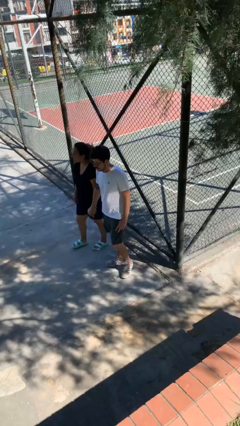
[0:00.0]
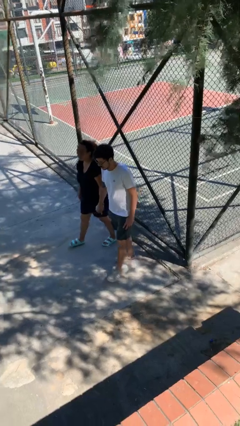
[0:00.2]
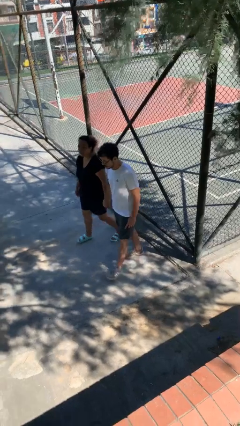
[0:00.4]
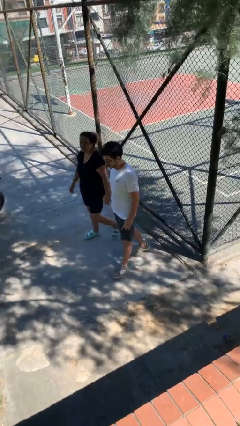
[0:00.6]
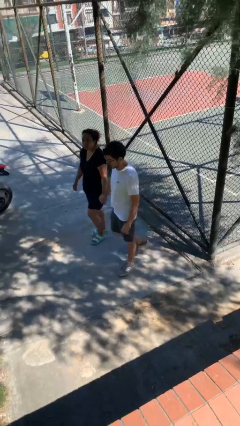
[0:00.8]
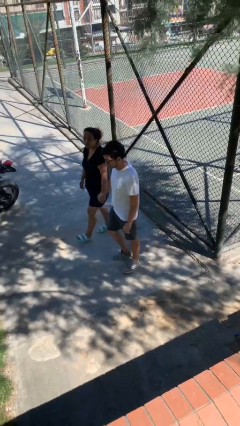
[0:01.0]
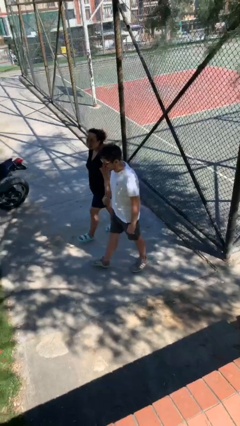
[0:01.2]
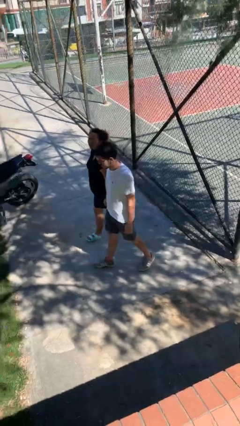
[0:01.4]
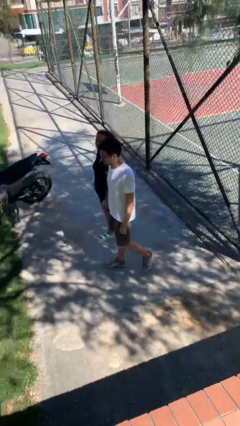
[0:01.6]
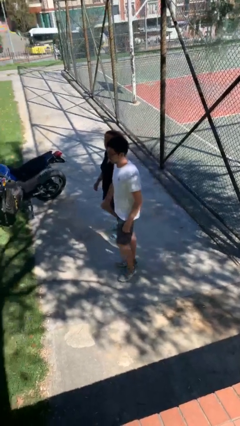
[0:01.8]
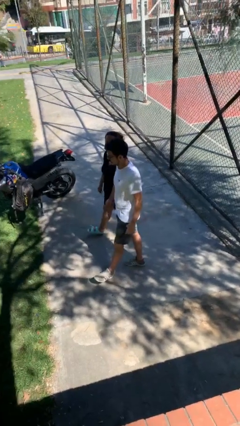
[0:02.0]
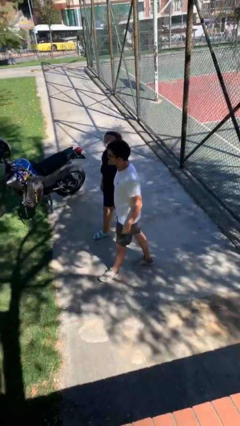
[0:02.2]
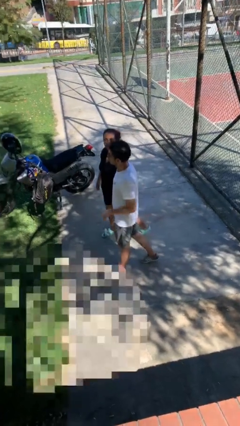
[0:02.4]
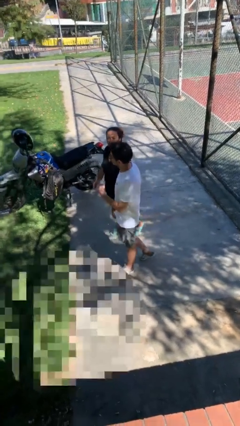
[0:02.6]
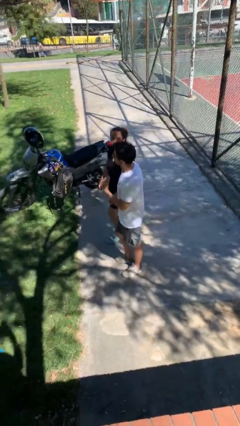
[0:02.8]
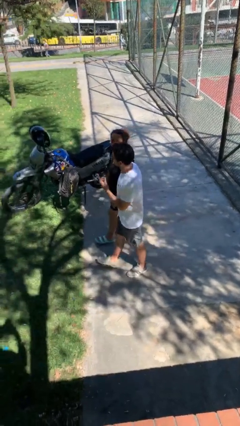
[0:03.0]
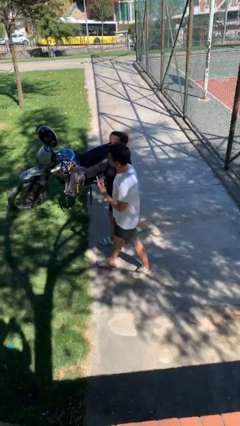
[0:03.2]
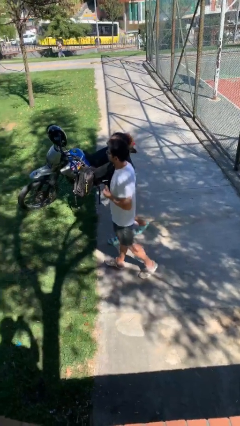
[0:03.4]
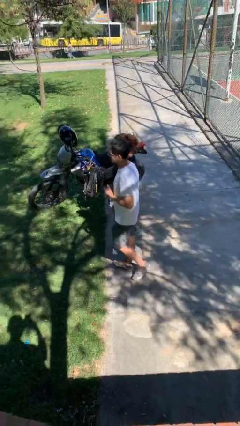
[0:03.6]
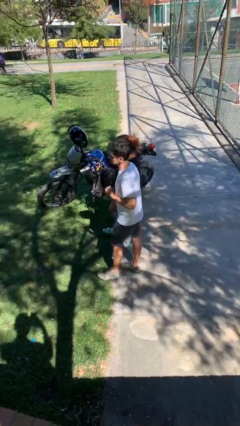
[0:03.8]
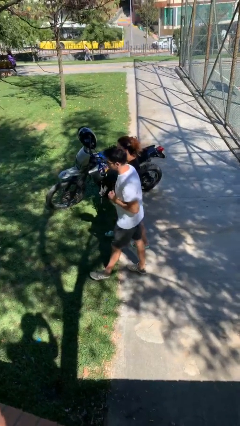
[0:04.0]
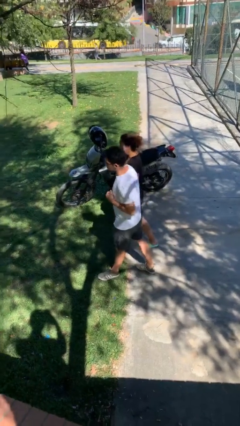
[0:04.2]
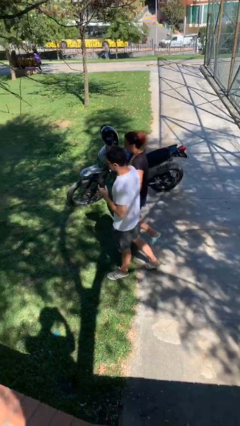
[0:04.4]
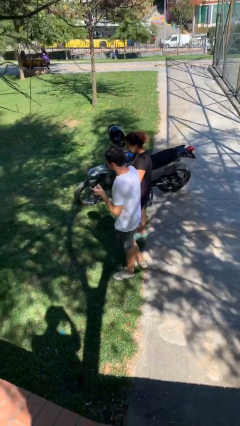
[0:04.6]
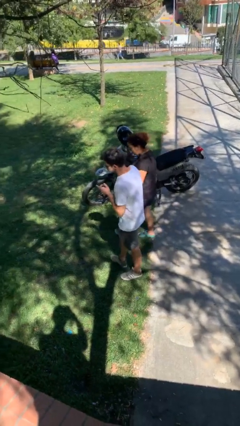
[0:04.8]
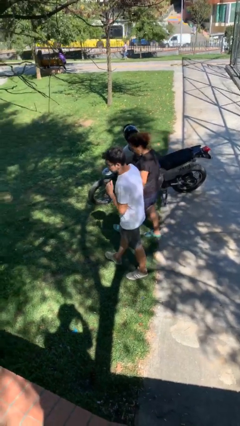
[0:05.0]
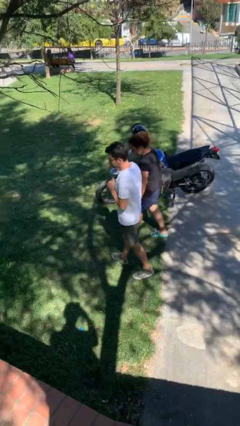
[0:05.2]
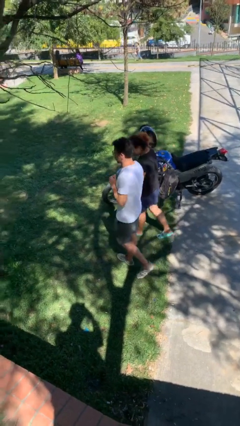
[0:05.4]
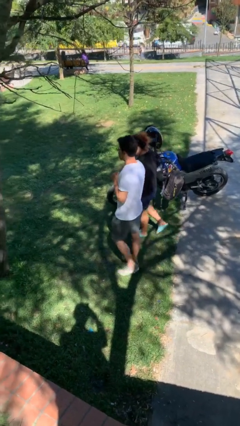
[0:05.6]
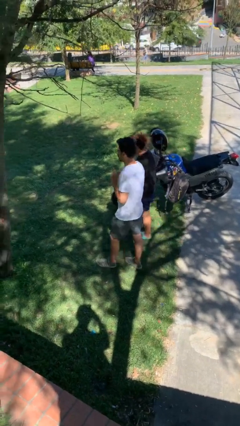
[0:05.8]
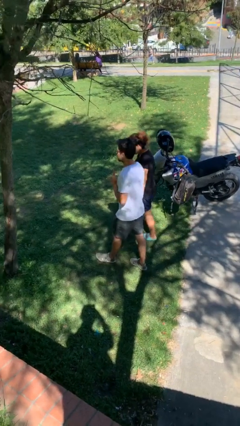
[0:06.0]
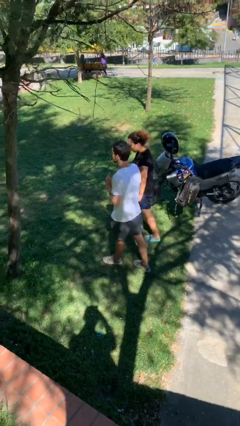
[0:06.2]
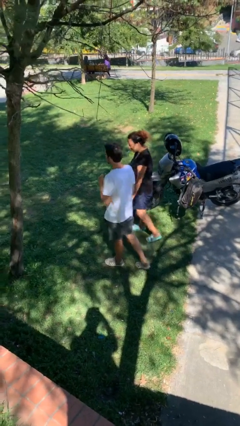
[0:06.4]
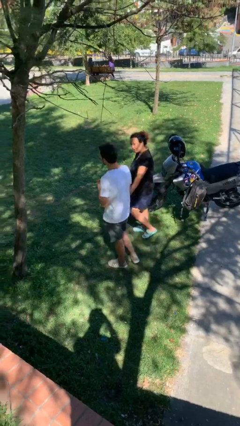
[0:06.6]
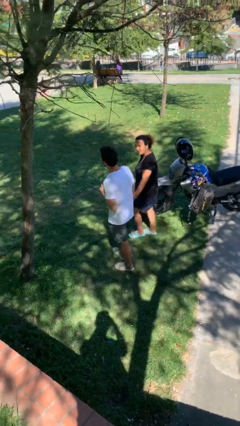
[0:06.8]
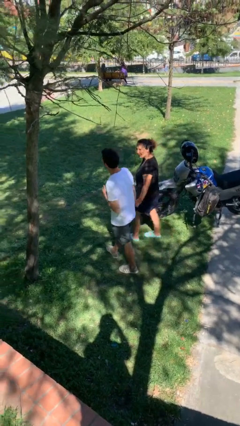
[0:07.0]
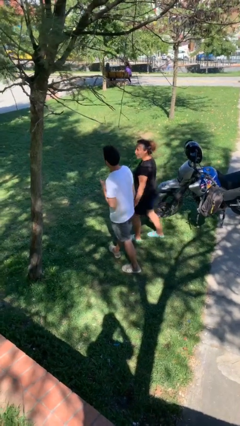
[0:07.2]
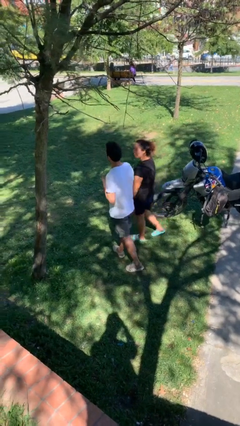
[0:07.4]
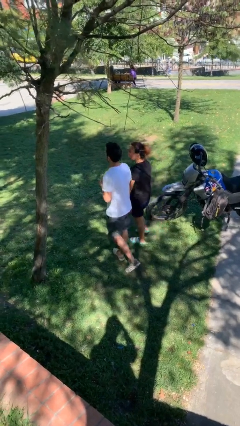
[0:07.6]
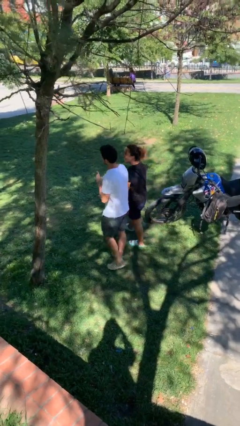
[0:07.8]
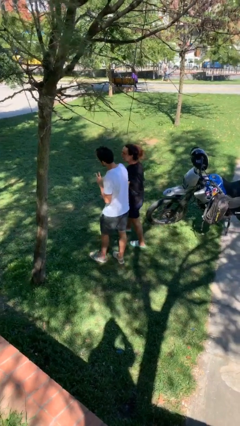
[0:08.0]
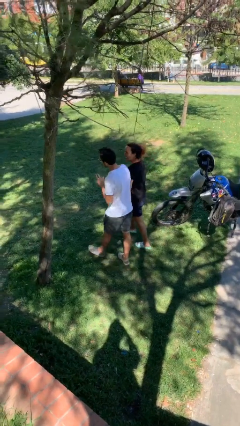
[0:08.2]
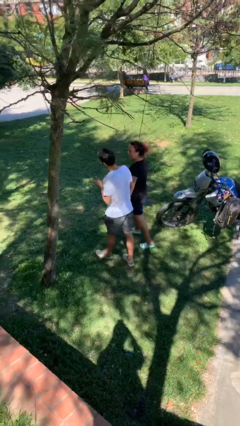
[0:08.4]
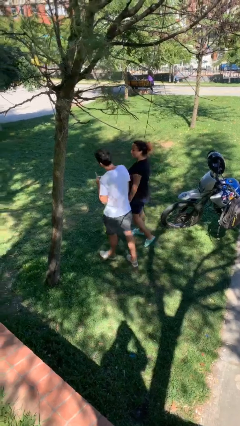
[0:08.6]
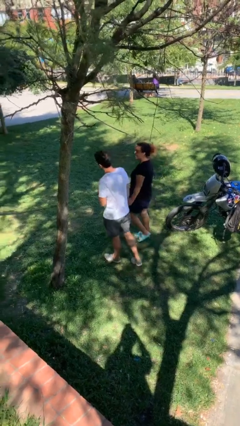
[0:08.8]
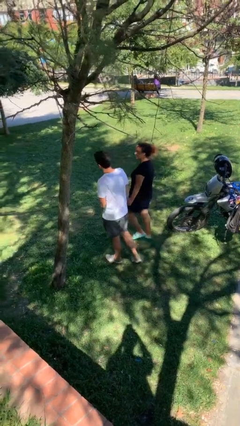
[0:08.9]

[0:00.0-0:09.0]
person holds hand

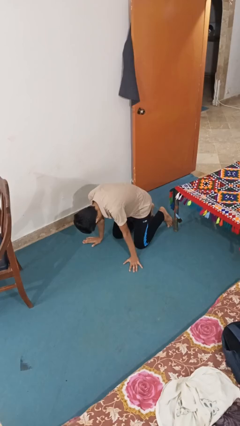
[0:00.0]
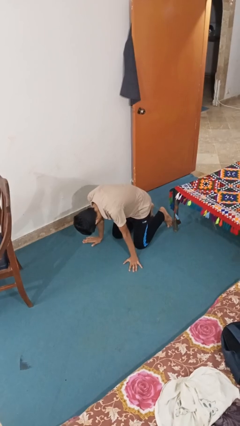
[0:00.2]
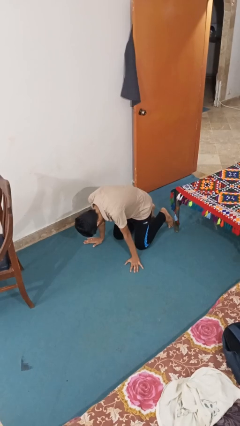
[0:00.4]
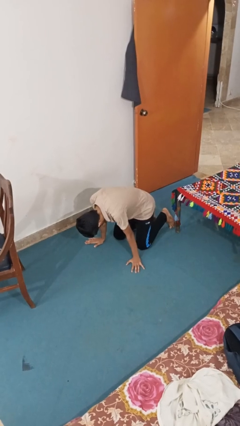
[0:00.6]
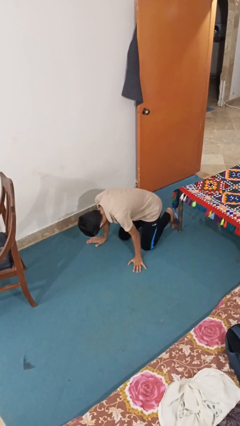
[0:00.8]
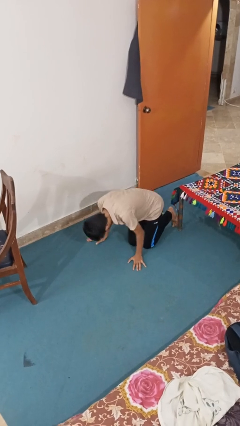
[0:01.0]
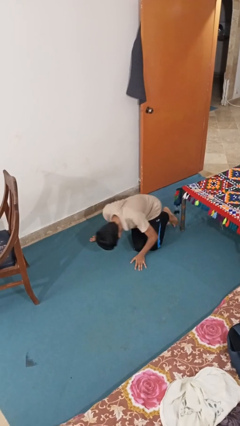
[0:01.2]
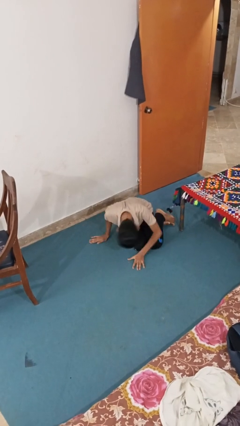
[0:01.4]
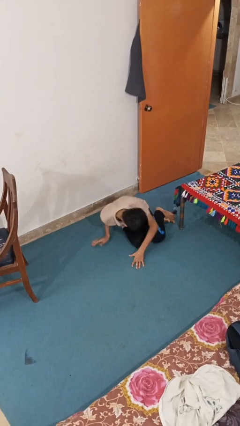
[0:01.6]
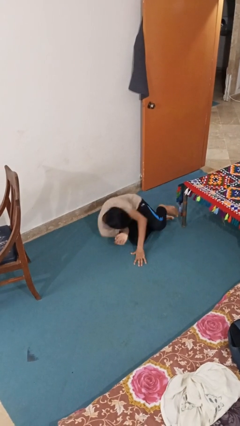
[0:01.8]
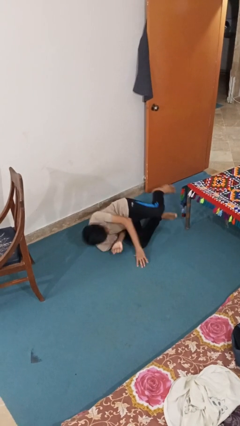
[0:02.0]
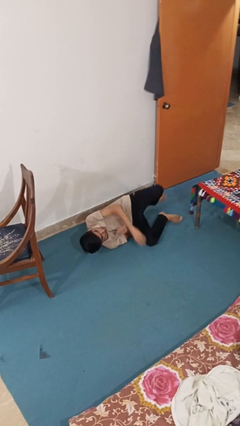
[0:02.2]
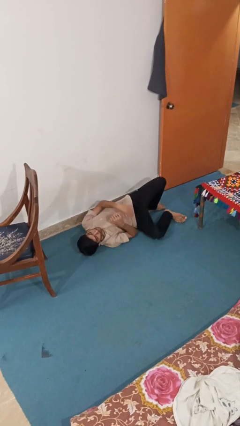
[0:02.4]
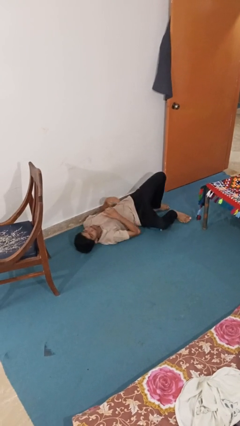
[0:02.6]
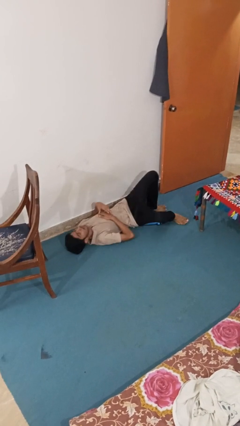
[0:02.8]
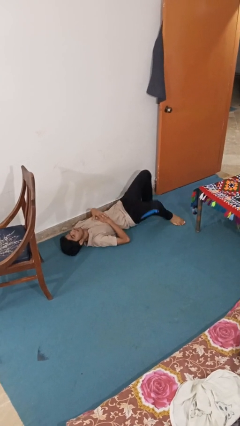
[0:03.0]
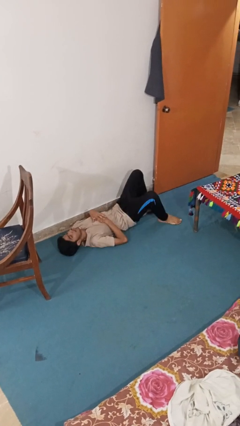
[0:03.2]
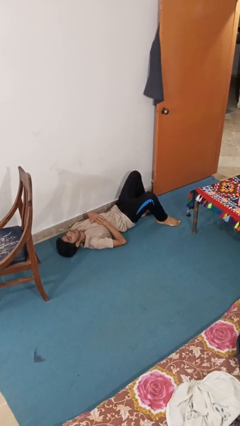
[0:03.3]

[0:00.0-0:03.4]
person lies down on floor

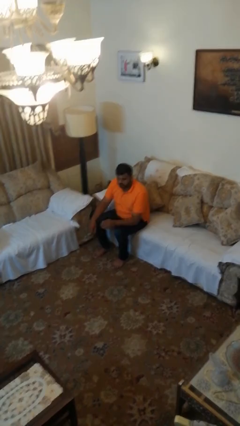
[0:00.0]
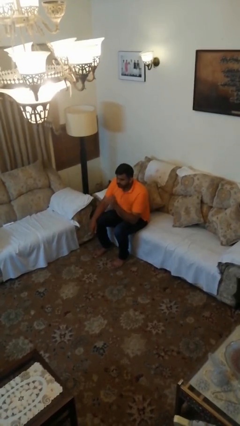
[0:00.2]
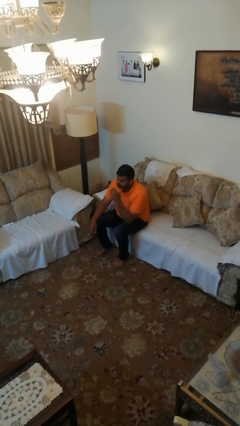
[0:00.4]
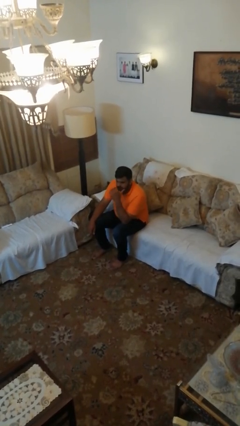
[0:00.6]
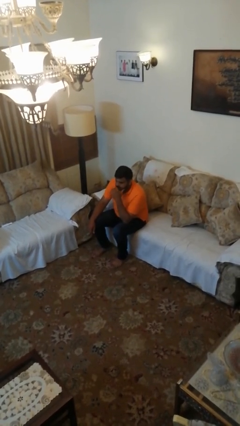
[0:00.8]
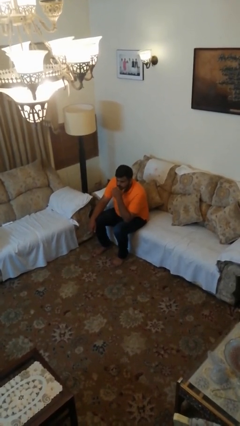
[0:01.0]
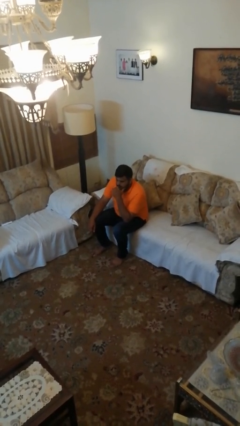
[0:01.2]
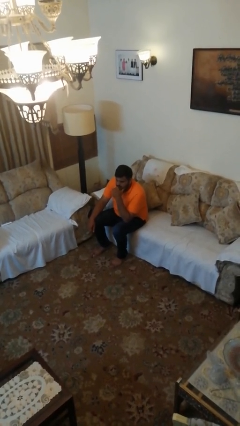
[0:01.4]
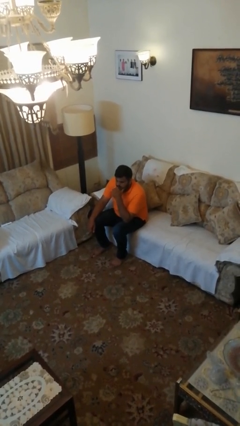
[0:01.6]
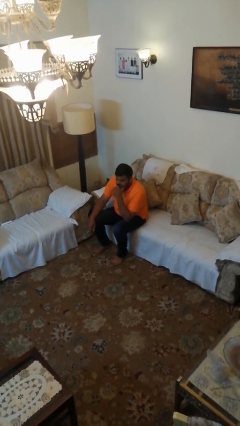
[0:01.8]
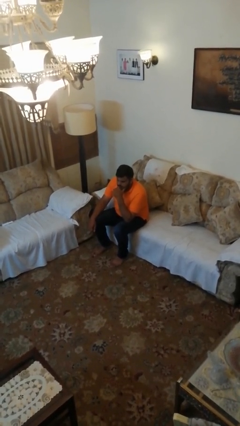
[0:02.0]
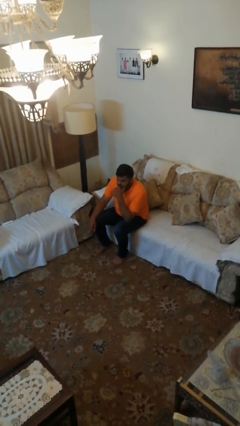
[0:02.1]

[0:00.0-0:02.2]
person strokes chin

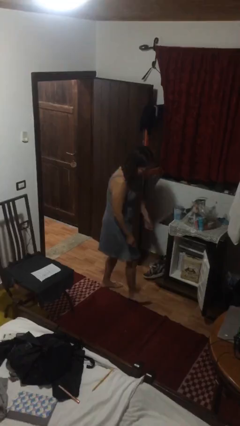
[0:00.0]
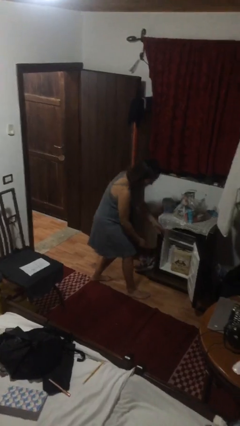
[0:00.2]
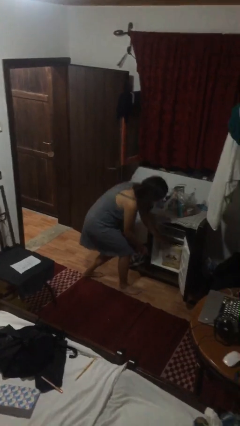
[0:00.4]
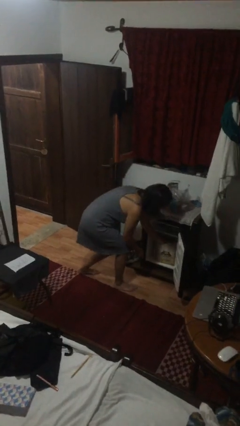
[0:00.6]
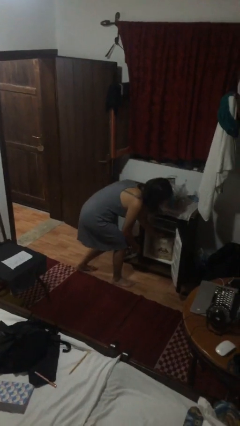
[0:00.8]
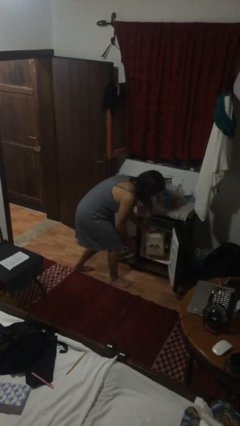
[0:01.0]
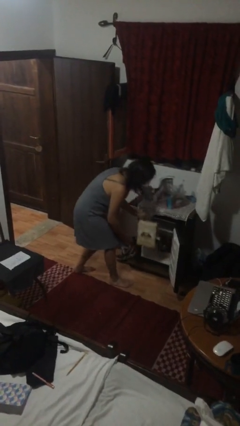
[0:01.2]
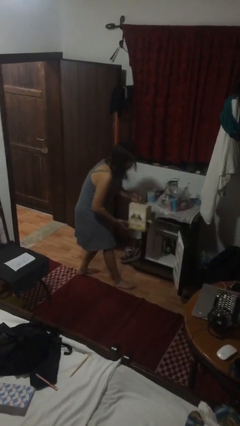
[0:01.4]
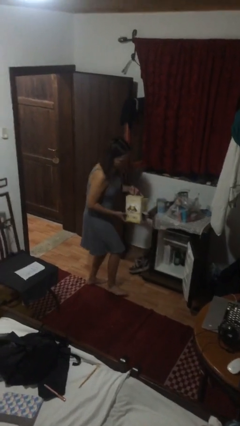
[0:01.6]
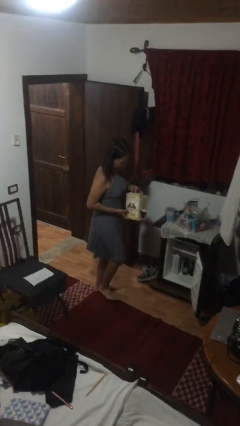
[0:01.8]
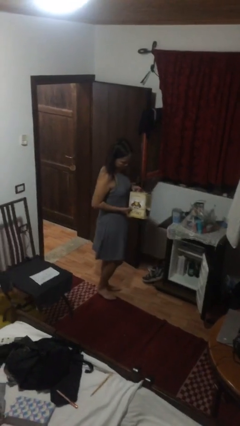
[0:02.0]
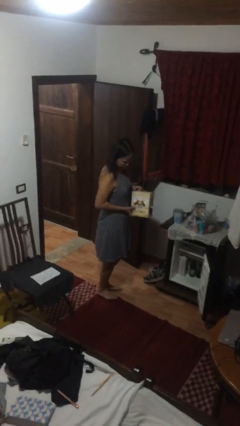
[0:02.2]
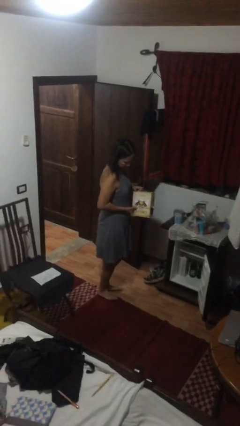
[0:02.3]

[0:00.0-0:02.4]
person picks up object from cabinet

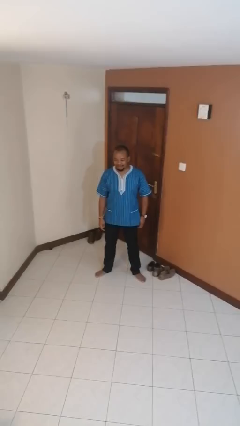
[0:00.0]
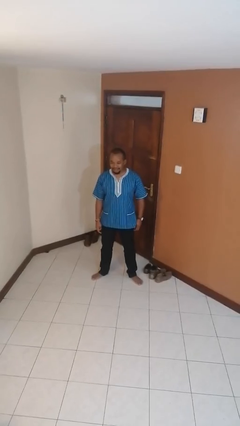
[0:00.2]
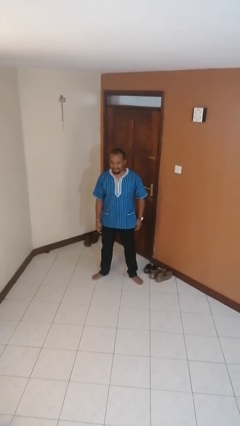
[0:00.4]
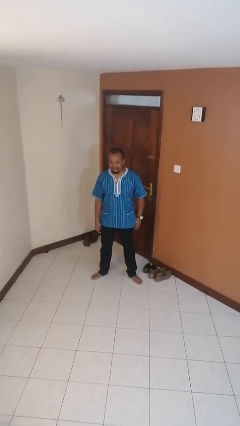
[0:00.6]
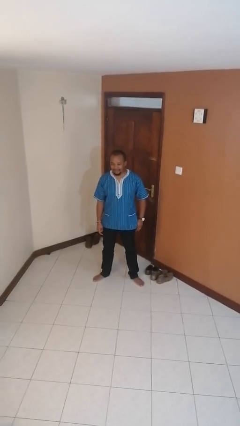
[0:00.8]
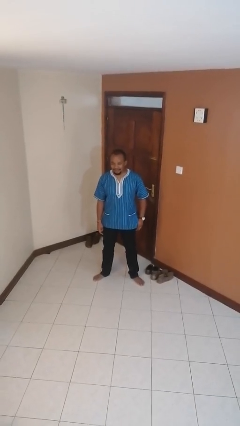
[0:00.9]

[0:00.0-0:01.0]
person tucks in shirt
